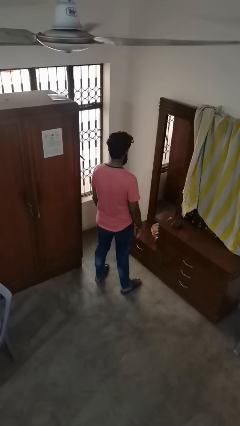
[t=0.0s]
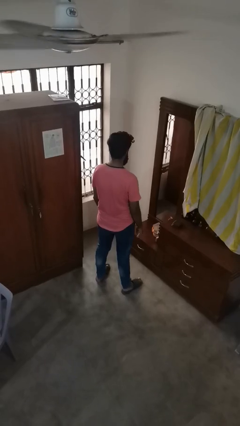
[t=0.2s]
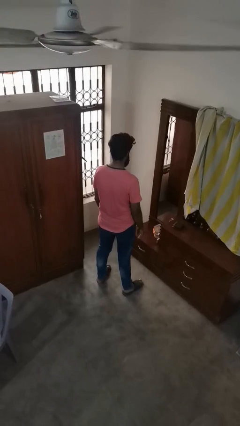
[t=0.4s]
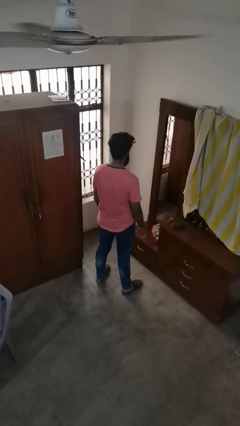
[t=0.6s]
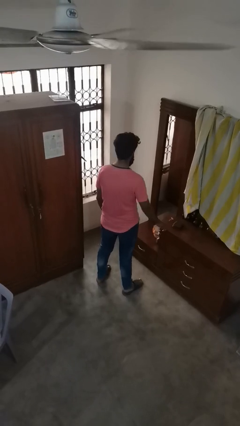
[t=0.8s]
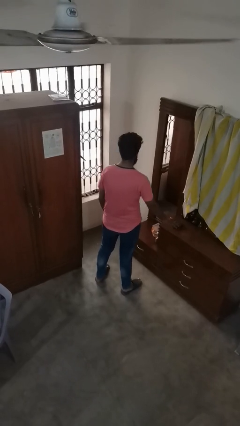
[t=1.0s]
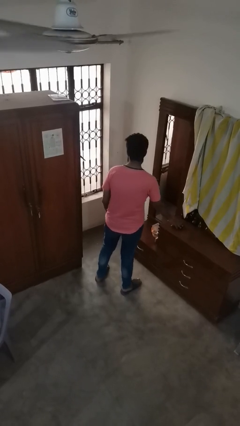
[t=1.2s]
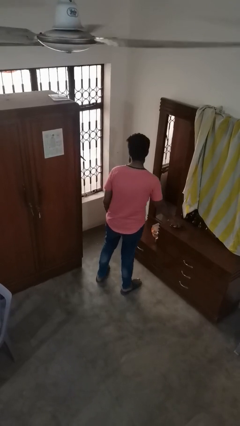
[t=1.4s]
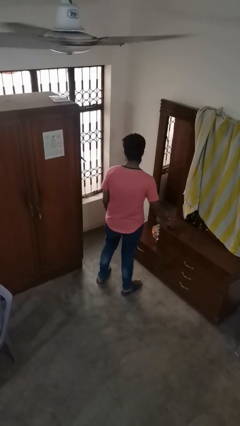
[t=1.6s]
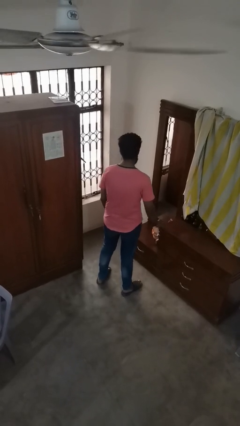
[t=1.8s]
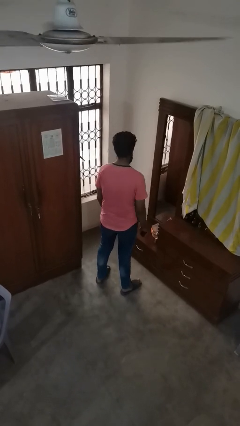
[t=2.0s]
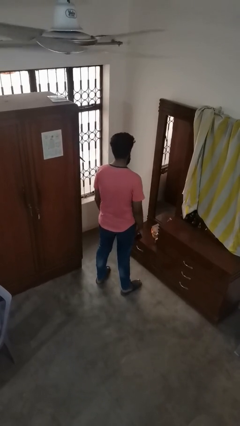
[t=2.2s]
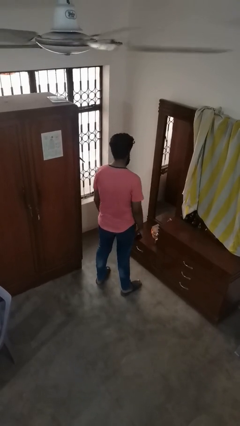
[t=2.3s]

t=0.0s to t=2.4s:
person picks up object from floor

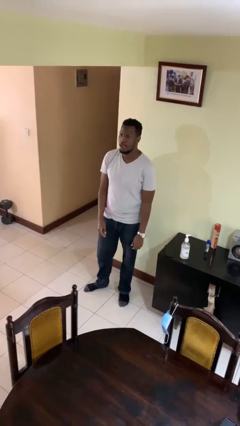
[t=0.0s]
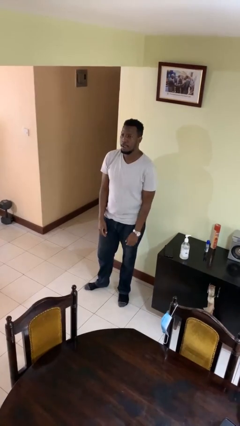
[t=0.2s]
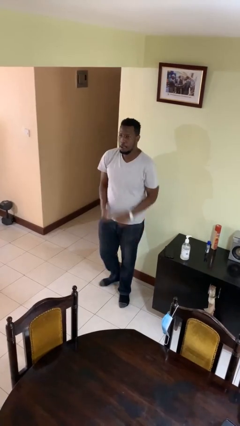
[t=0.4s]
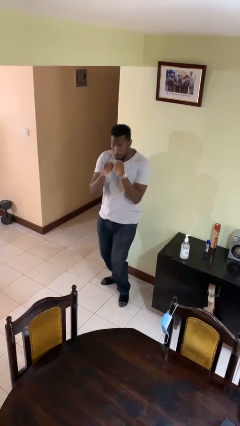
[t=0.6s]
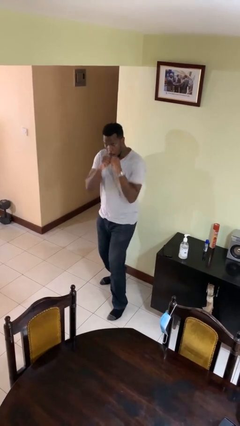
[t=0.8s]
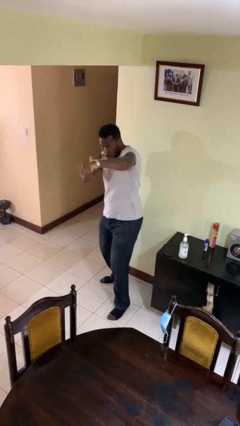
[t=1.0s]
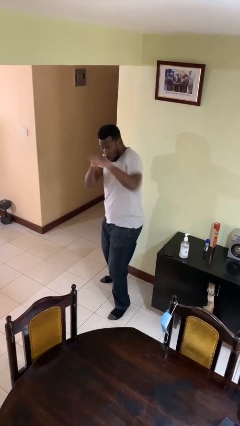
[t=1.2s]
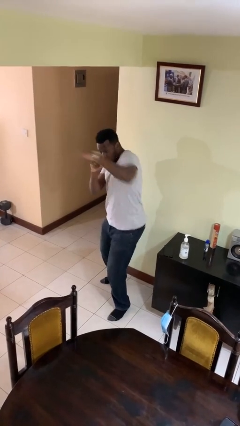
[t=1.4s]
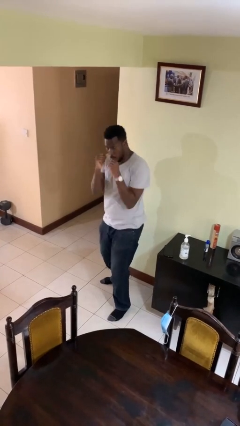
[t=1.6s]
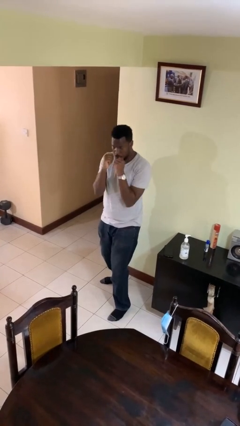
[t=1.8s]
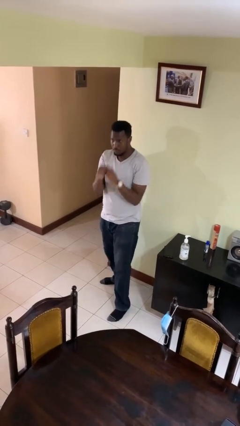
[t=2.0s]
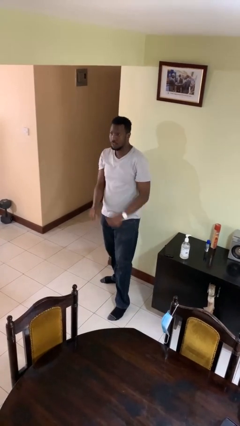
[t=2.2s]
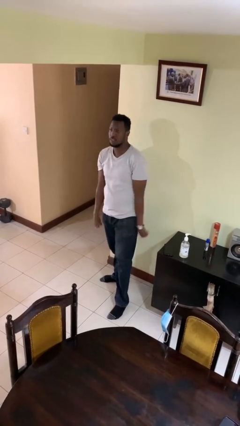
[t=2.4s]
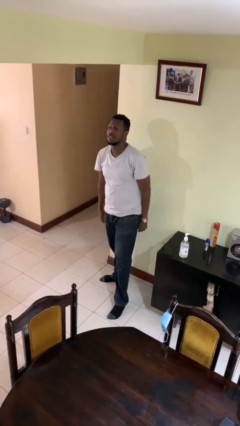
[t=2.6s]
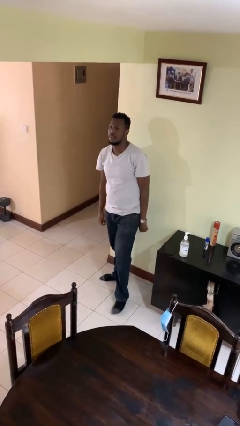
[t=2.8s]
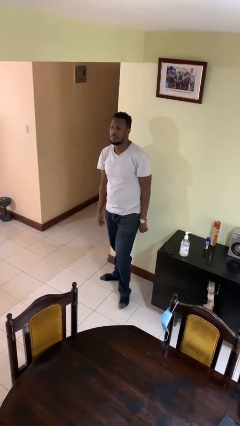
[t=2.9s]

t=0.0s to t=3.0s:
person punches

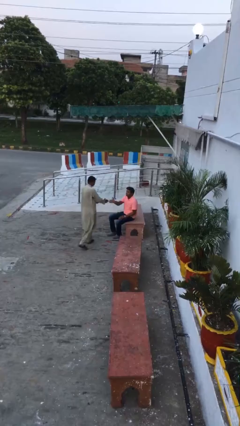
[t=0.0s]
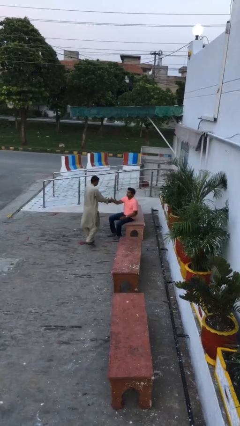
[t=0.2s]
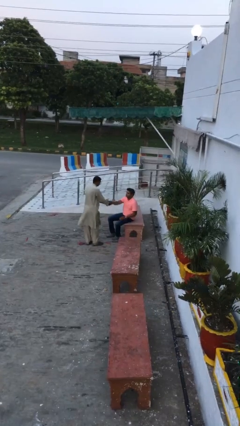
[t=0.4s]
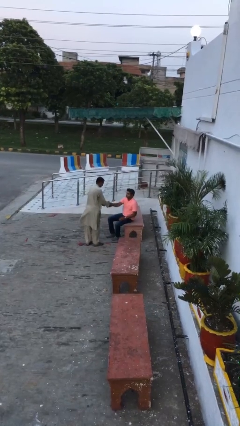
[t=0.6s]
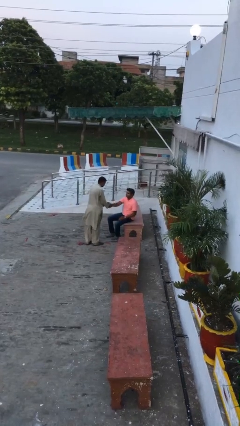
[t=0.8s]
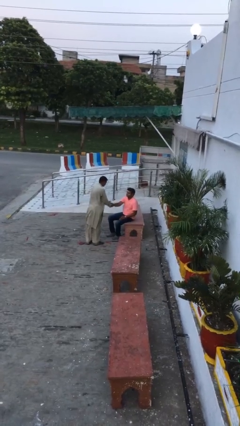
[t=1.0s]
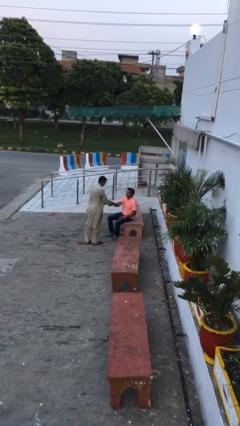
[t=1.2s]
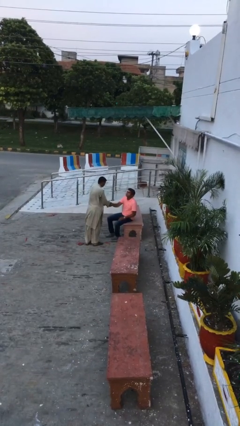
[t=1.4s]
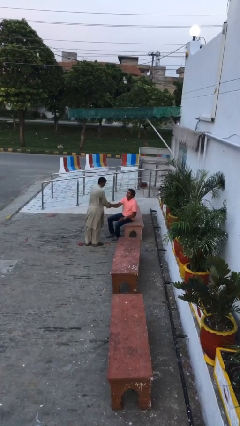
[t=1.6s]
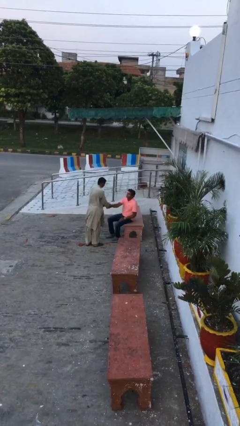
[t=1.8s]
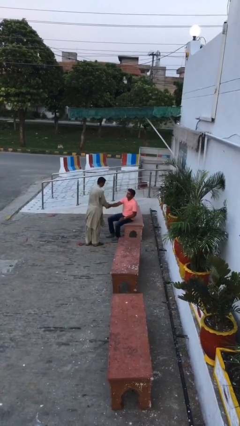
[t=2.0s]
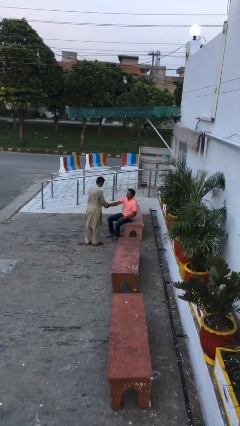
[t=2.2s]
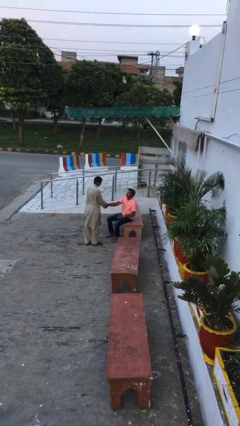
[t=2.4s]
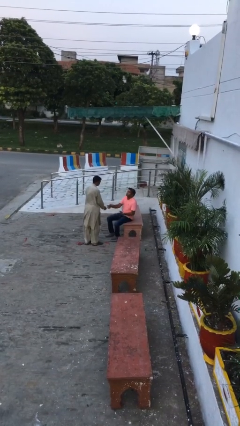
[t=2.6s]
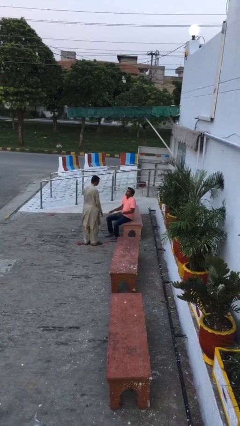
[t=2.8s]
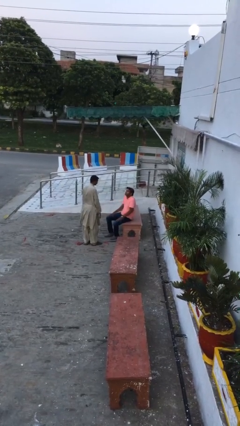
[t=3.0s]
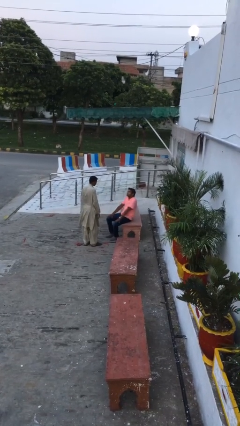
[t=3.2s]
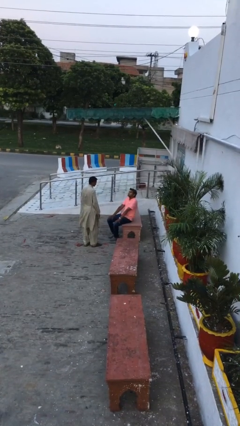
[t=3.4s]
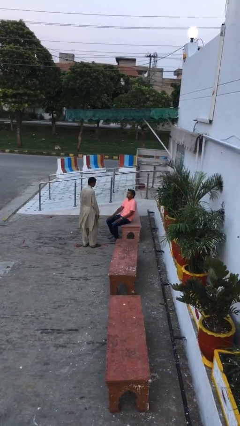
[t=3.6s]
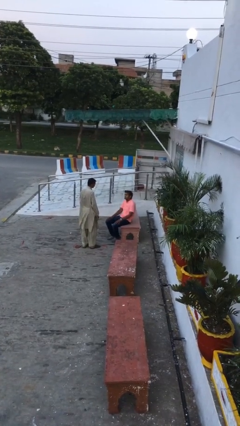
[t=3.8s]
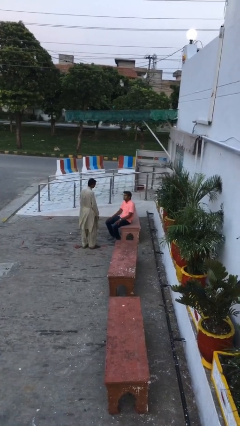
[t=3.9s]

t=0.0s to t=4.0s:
person shakes hand

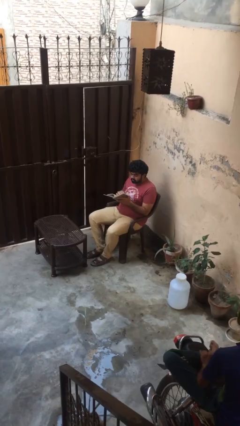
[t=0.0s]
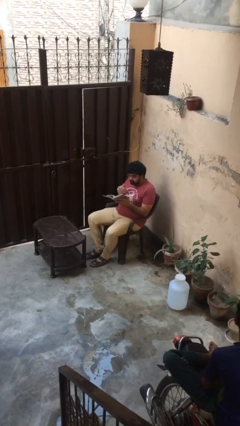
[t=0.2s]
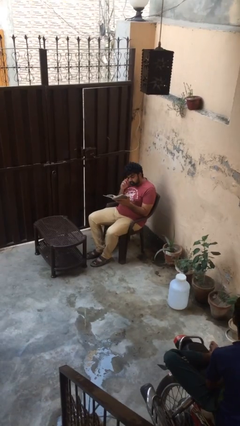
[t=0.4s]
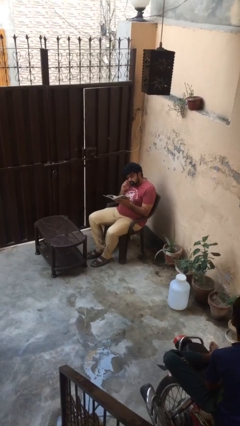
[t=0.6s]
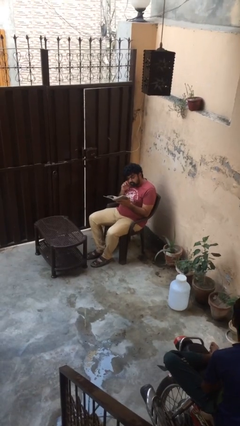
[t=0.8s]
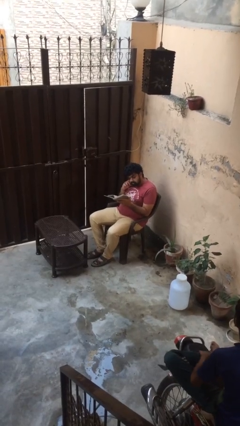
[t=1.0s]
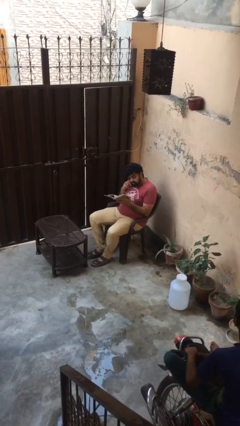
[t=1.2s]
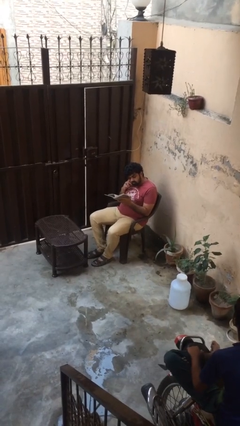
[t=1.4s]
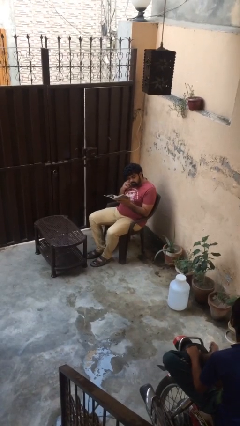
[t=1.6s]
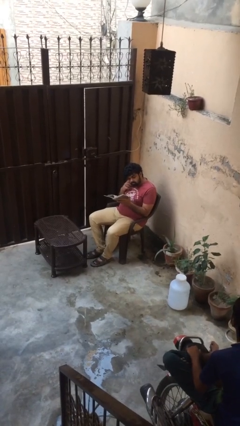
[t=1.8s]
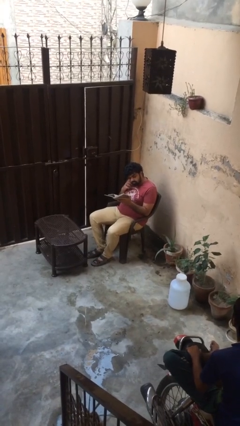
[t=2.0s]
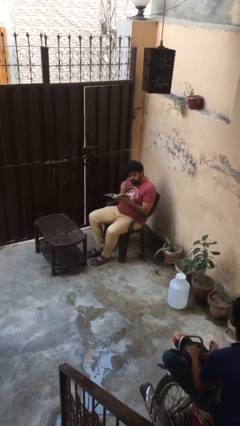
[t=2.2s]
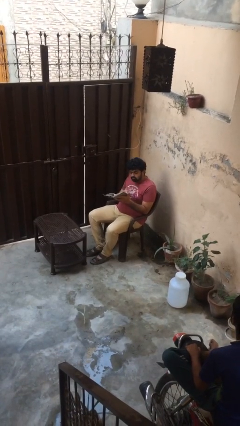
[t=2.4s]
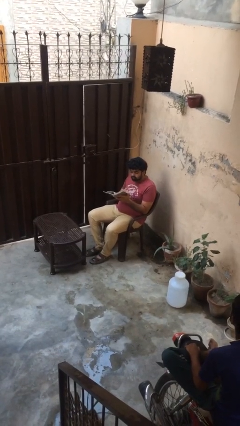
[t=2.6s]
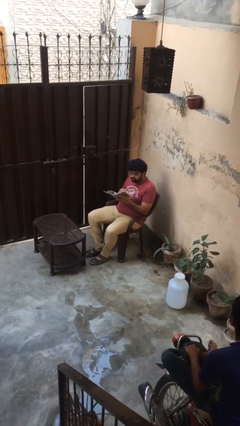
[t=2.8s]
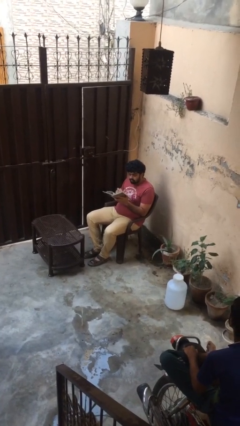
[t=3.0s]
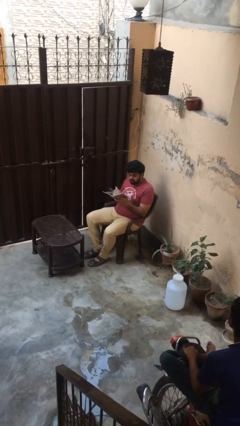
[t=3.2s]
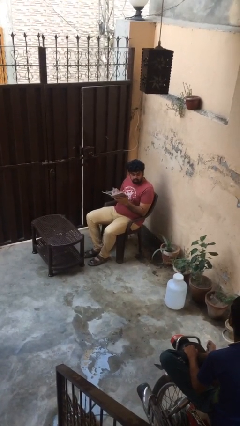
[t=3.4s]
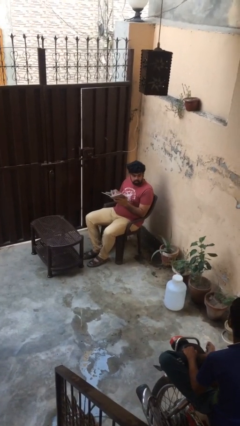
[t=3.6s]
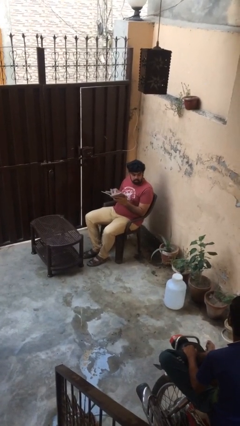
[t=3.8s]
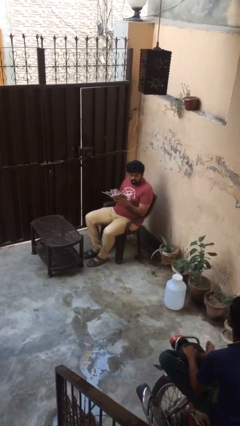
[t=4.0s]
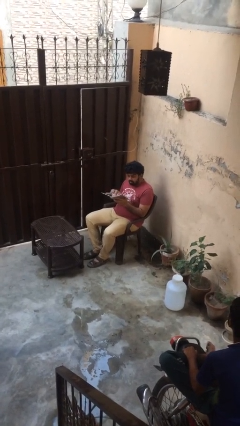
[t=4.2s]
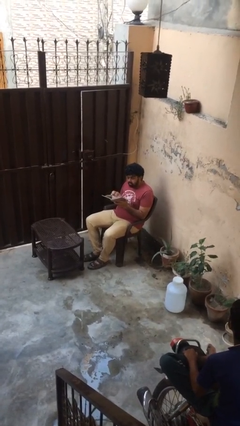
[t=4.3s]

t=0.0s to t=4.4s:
person reads document

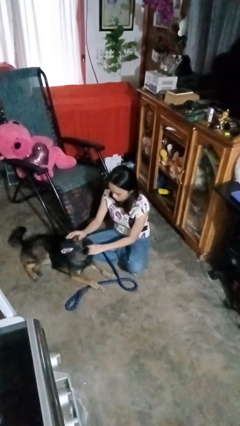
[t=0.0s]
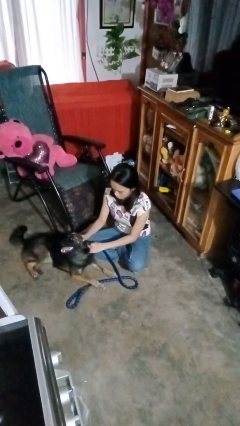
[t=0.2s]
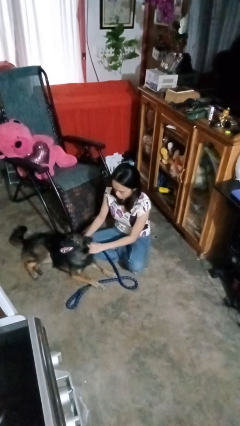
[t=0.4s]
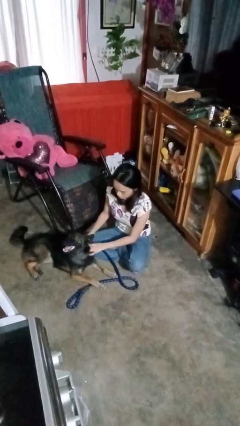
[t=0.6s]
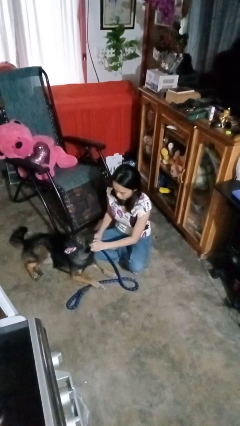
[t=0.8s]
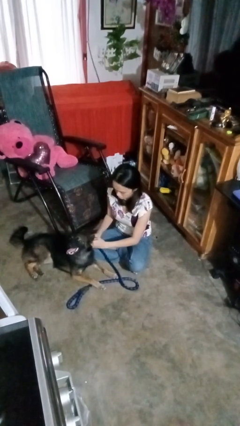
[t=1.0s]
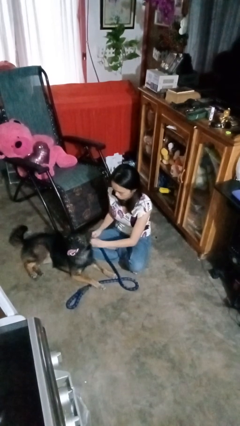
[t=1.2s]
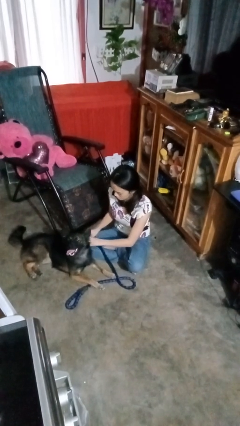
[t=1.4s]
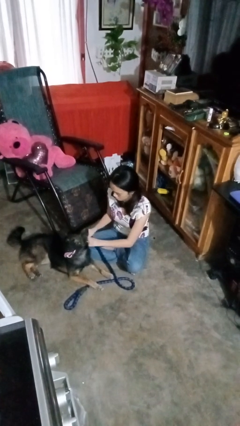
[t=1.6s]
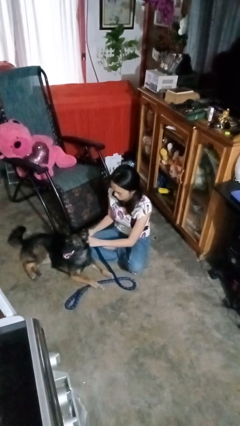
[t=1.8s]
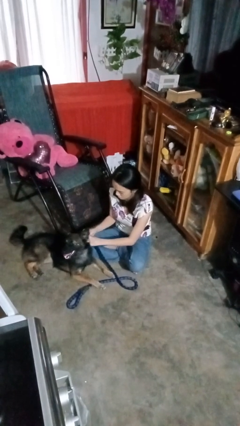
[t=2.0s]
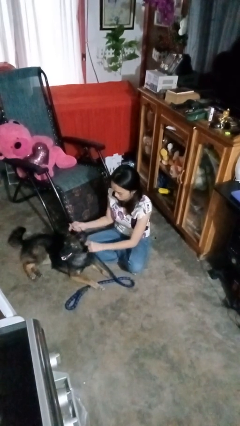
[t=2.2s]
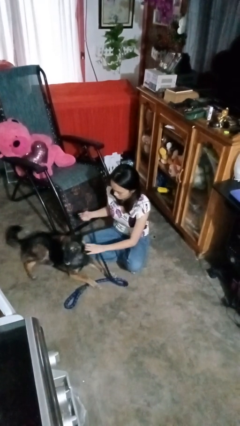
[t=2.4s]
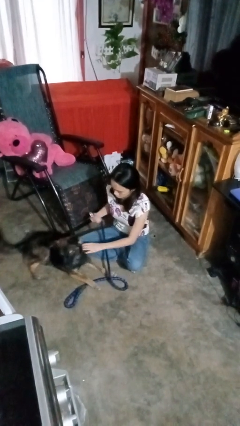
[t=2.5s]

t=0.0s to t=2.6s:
person unattaches leash from dog

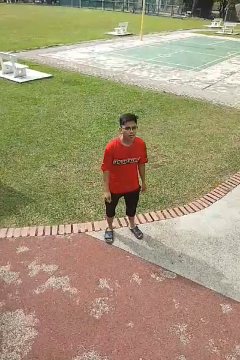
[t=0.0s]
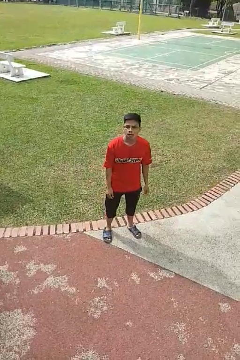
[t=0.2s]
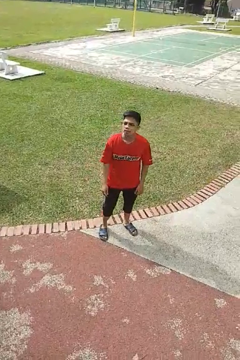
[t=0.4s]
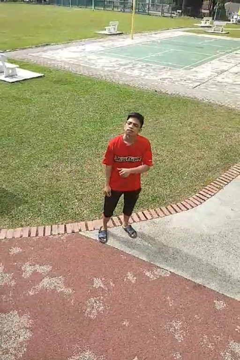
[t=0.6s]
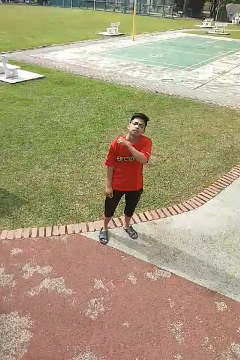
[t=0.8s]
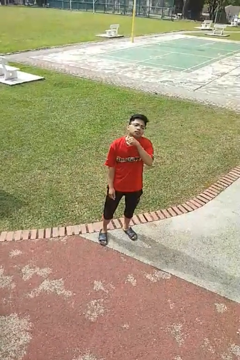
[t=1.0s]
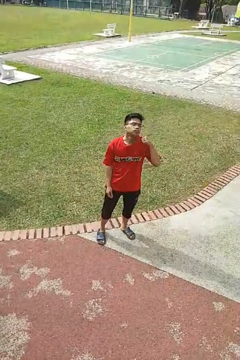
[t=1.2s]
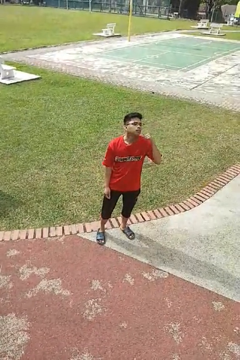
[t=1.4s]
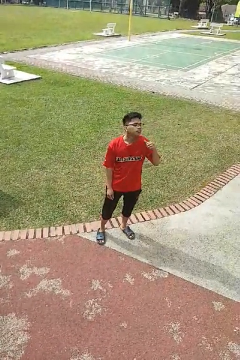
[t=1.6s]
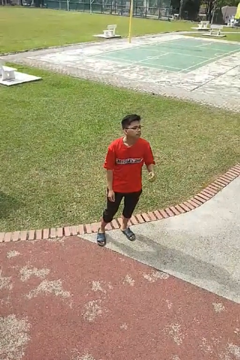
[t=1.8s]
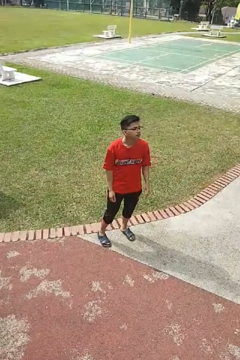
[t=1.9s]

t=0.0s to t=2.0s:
person gestures cut
